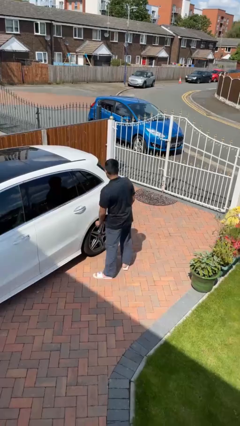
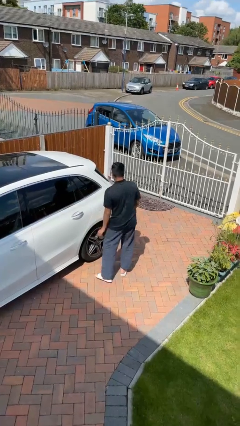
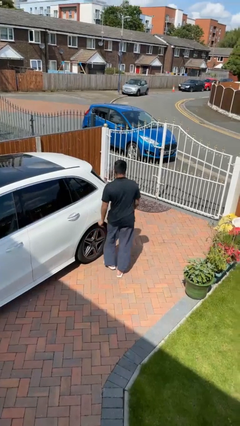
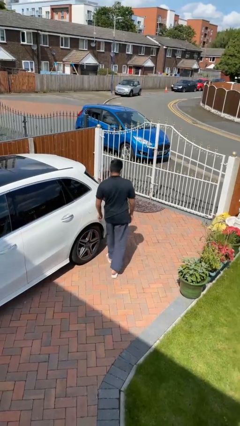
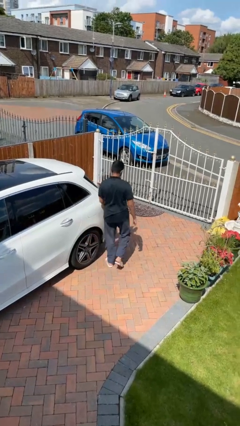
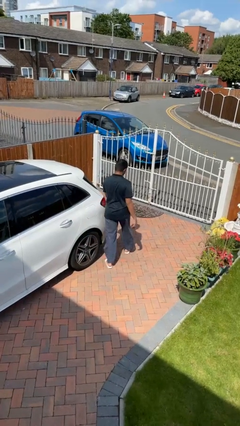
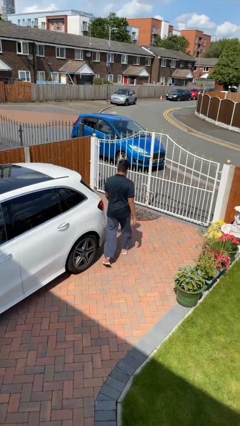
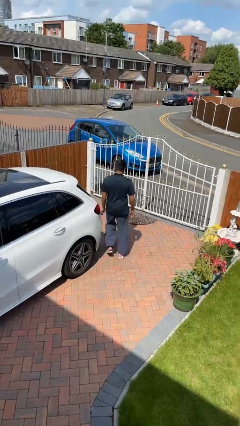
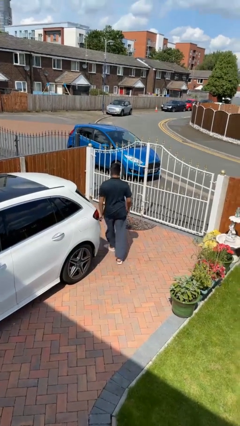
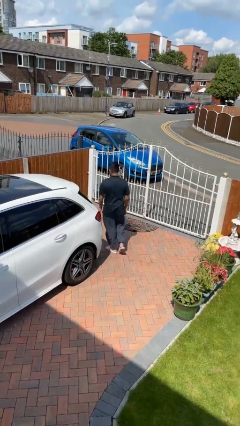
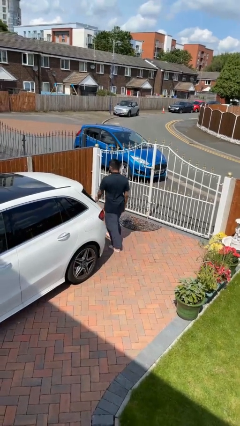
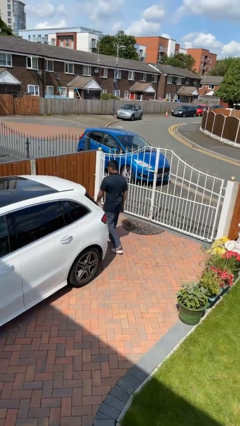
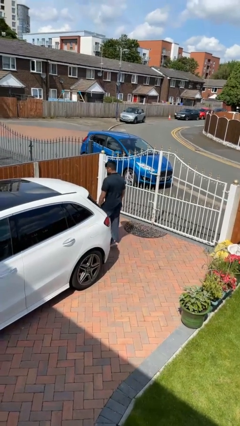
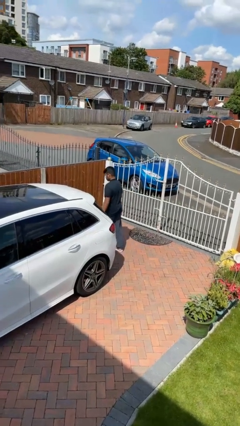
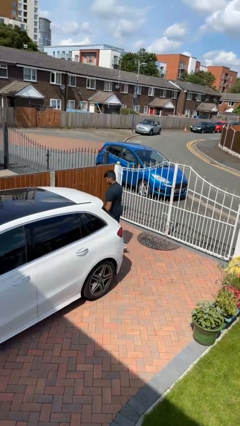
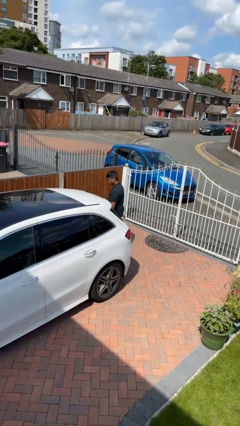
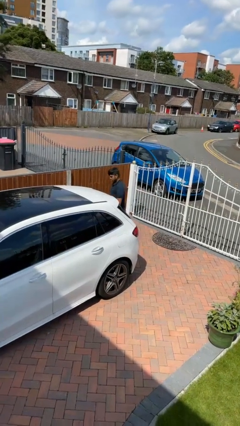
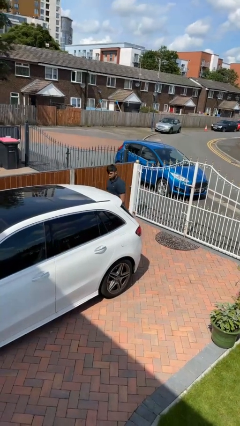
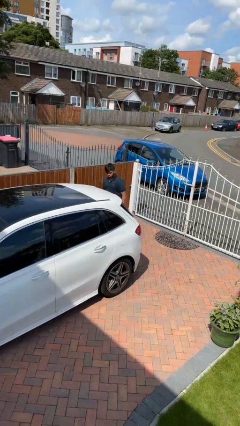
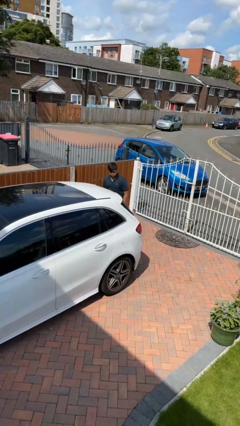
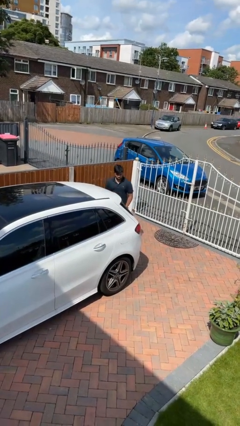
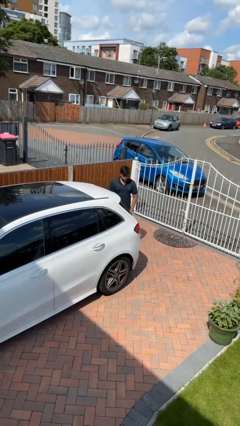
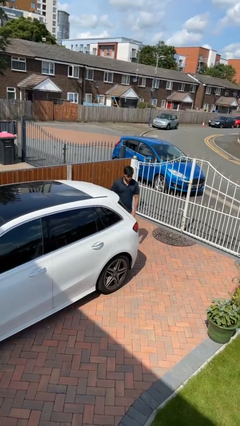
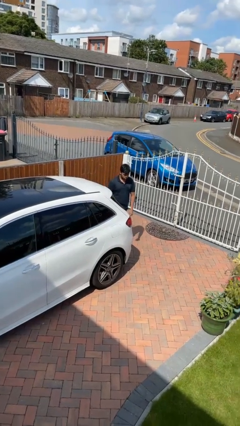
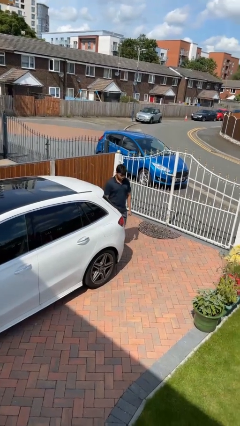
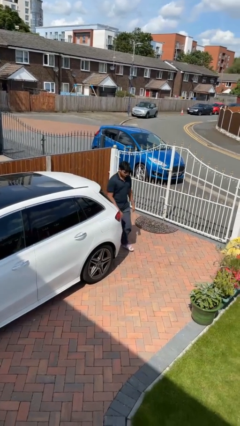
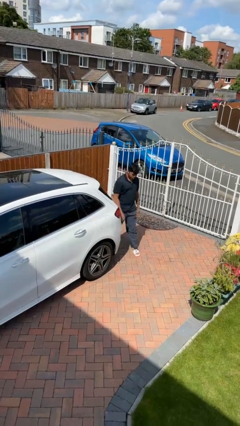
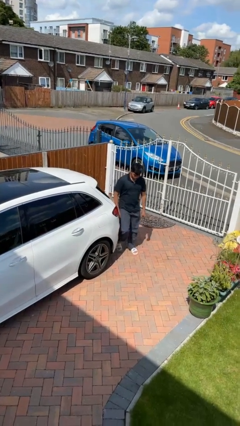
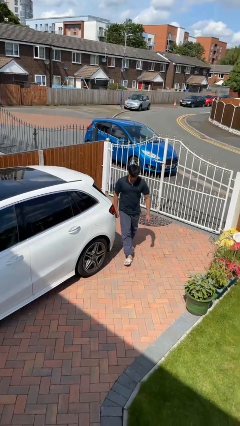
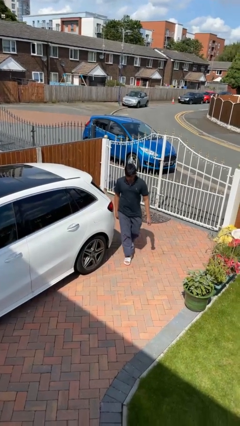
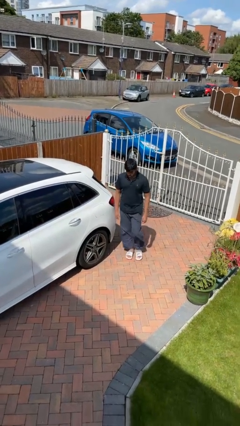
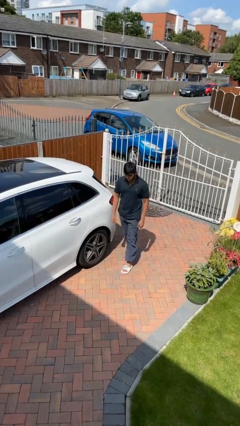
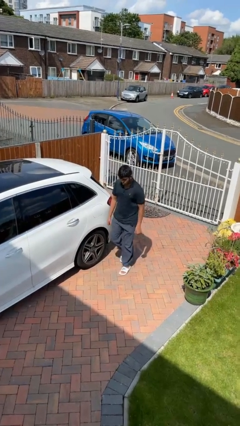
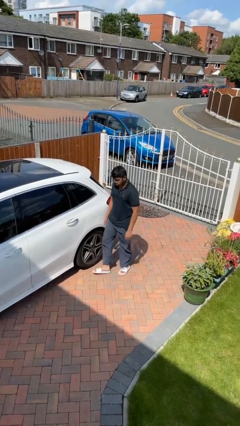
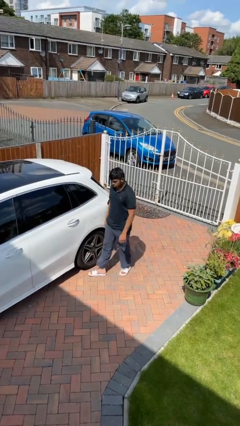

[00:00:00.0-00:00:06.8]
person walks around car

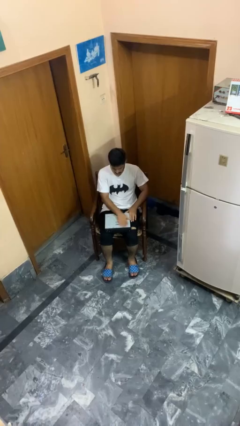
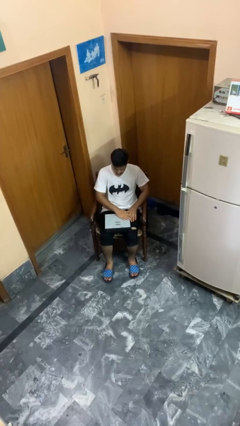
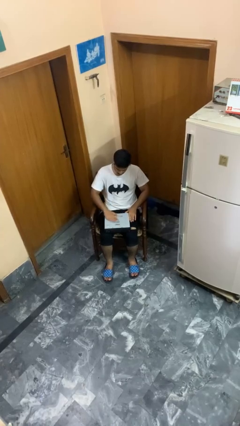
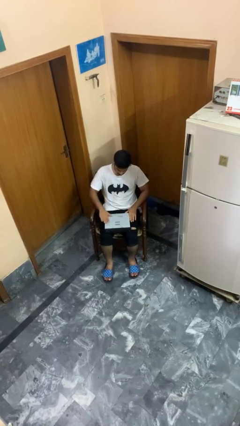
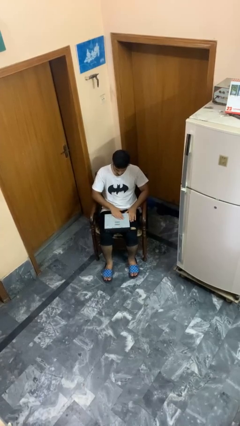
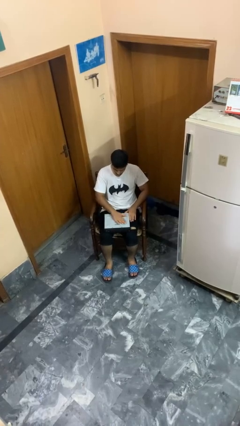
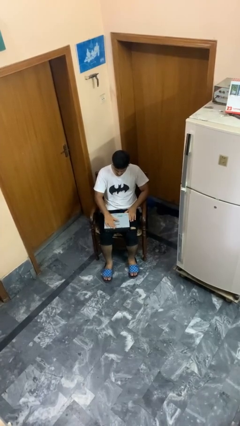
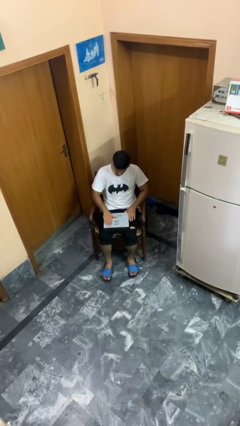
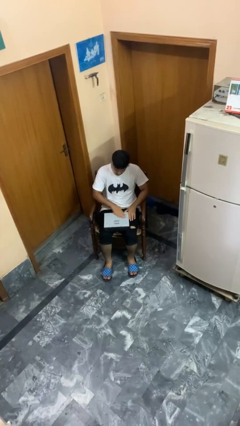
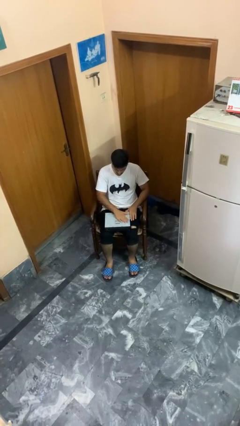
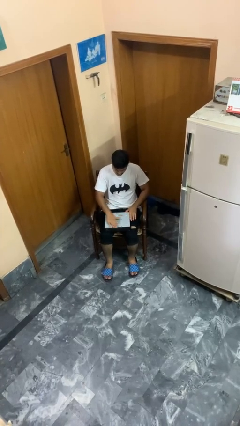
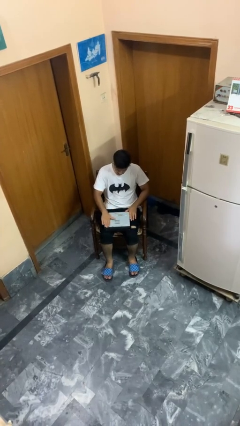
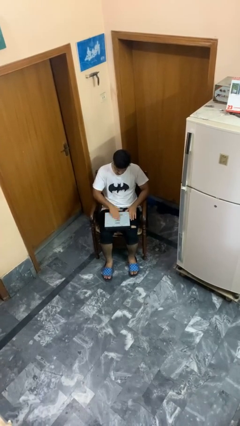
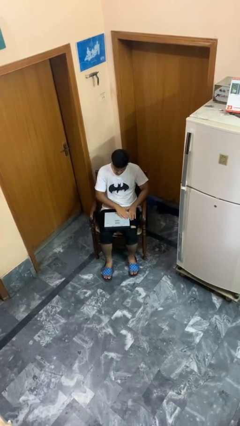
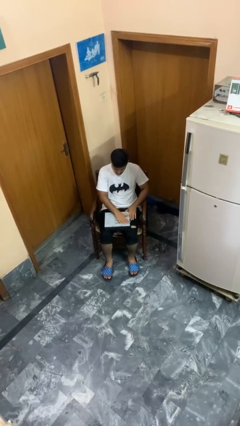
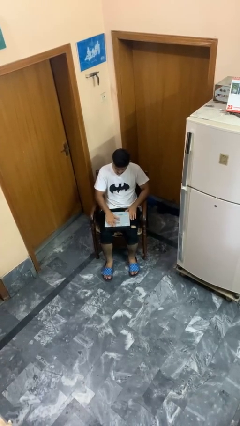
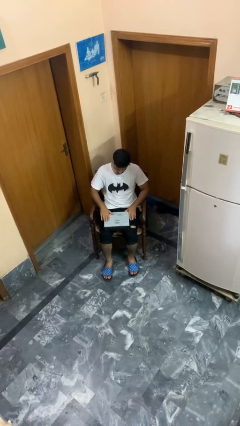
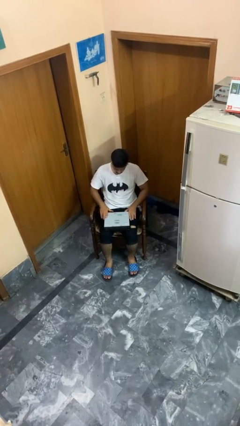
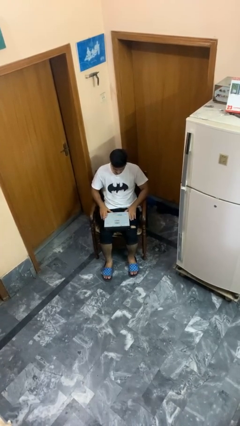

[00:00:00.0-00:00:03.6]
person waves hand over object

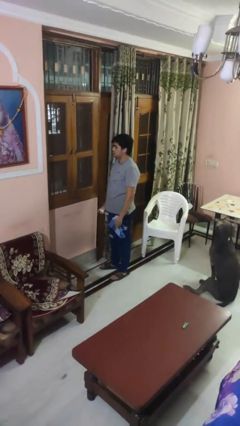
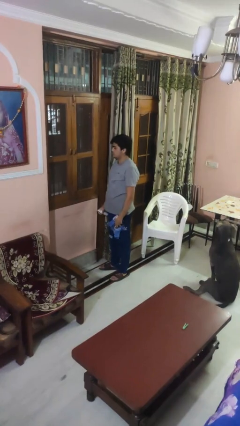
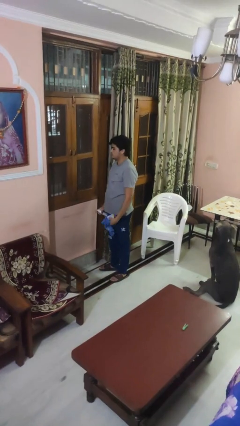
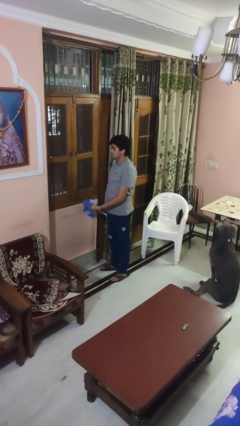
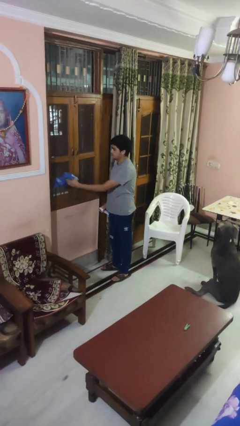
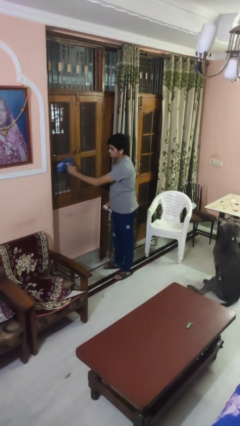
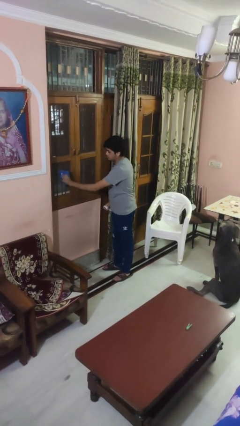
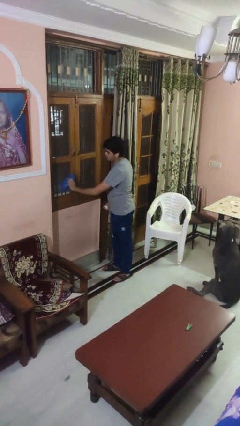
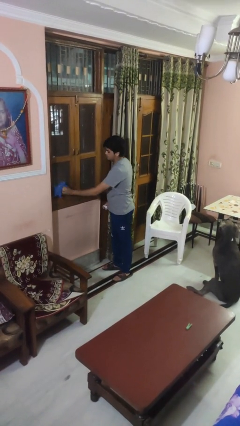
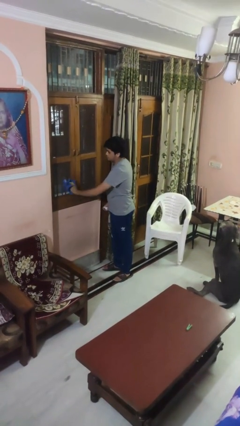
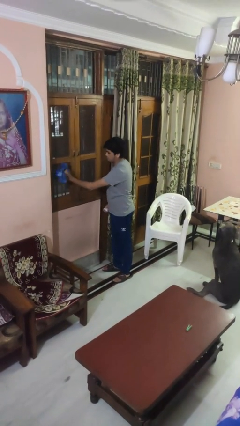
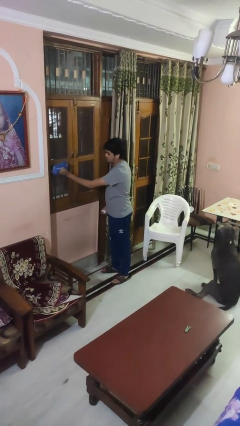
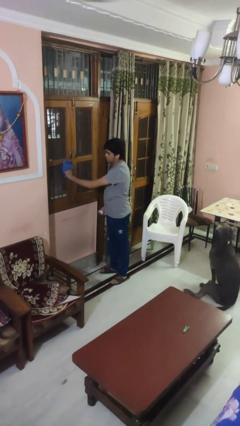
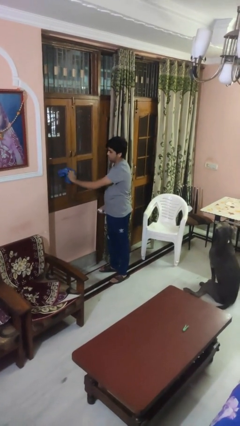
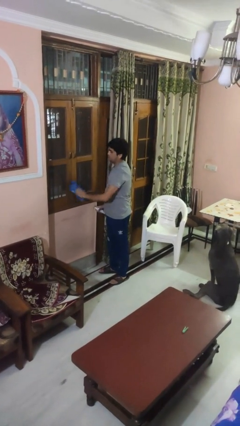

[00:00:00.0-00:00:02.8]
person washes window

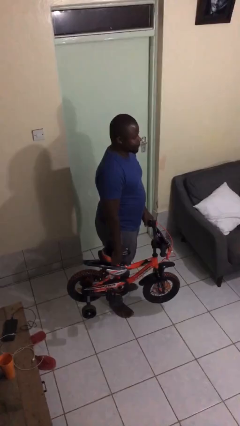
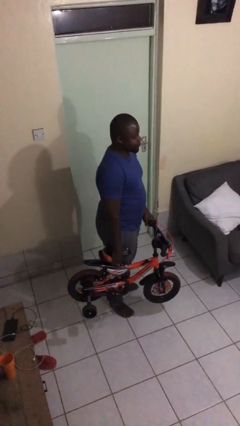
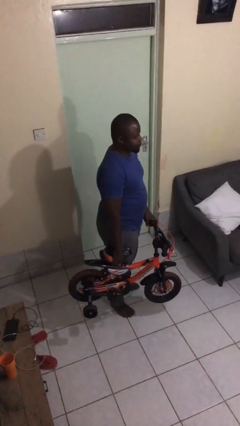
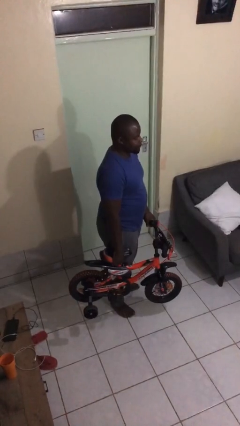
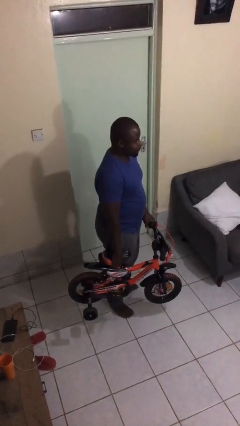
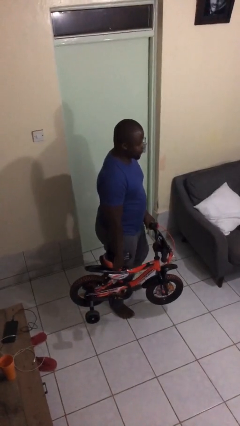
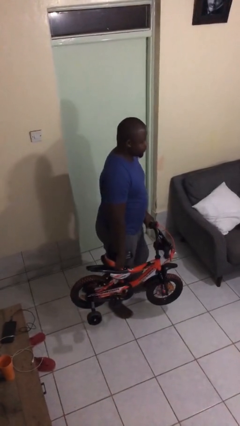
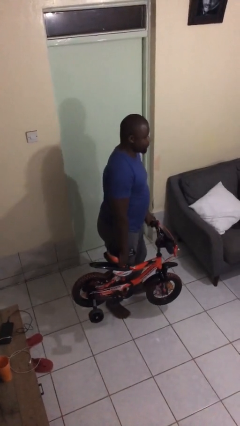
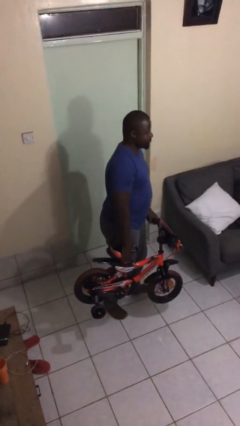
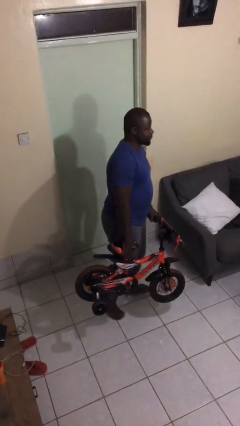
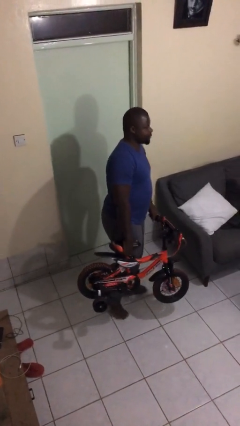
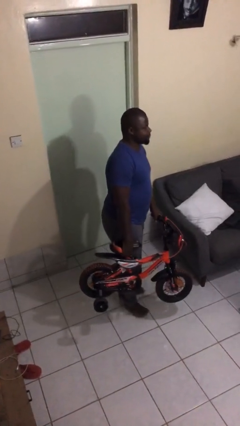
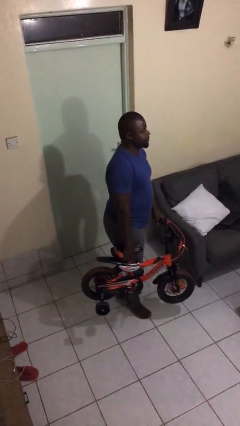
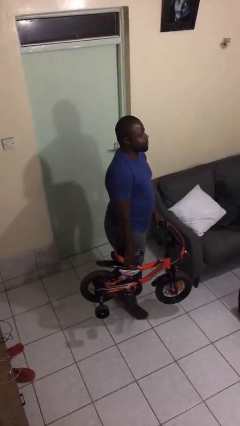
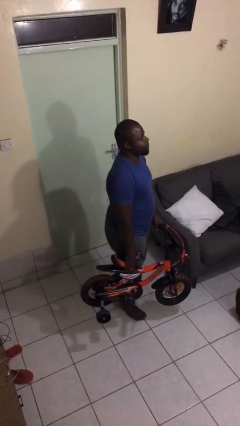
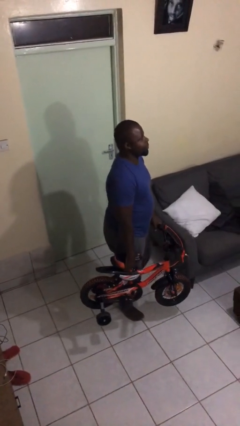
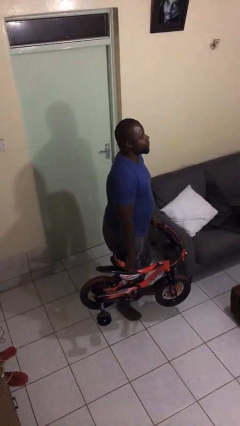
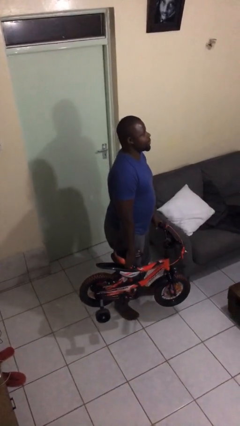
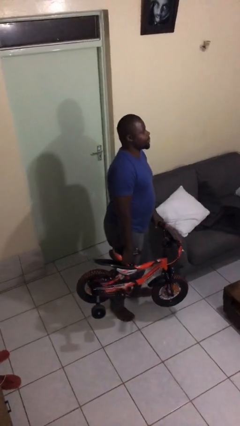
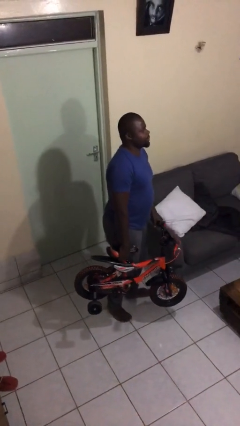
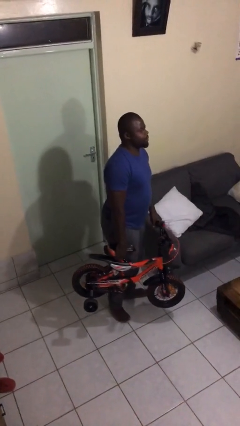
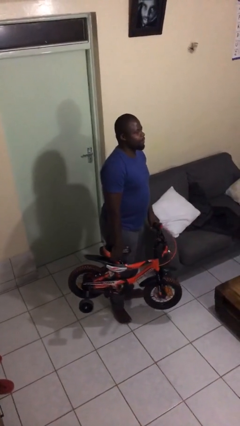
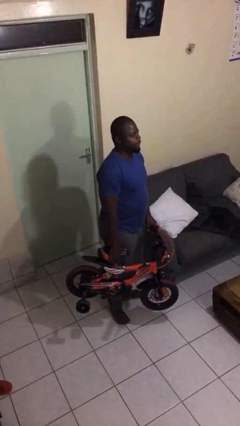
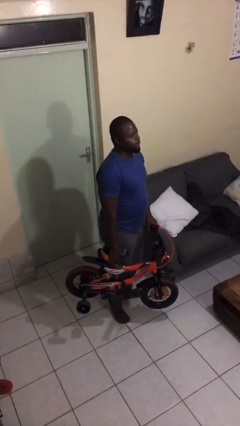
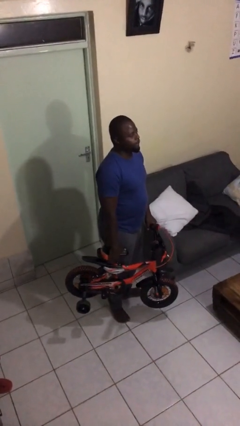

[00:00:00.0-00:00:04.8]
person carries bicycle
